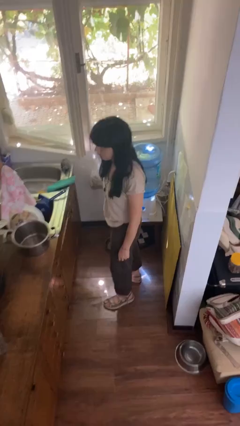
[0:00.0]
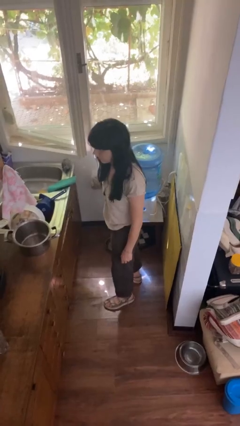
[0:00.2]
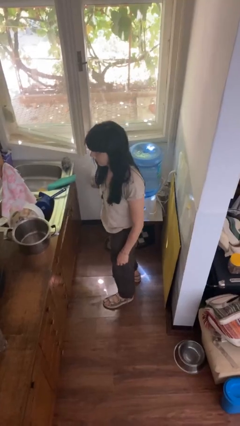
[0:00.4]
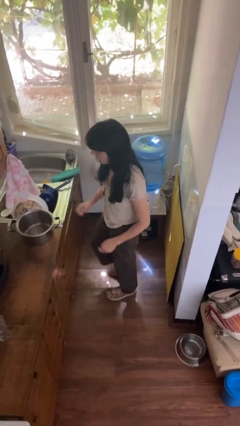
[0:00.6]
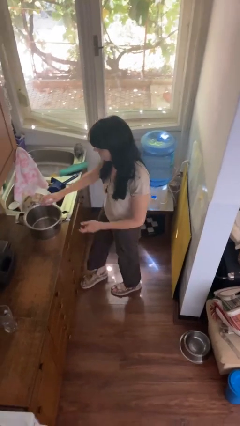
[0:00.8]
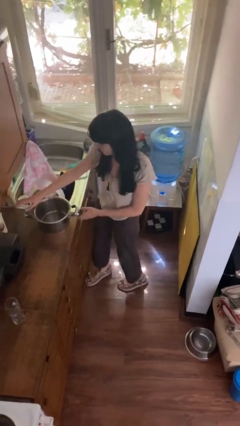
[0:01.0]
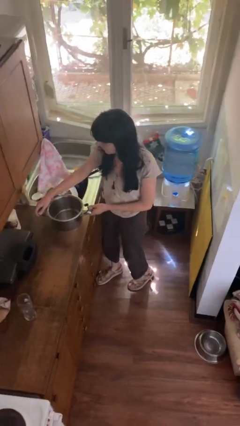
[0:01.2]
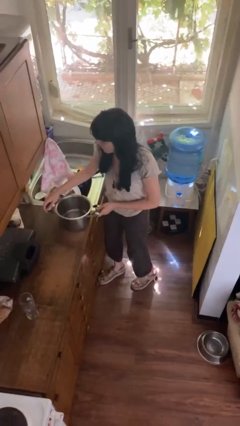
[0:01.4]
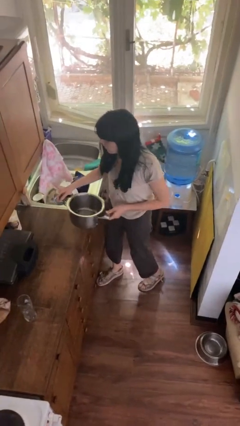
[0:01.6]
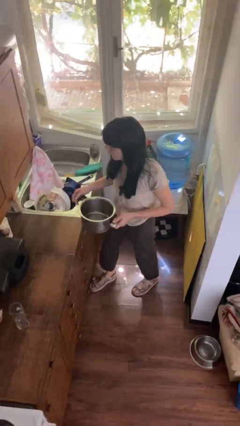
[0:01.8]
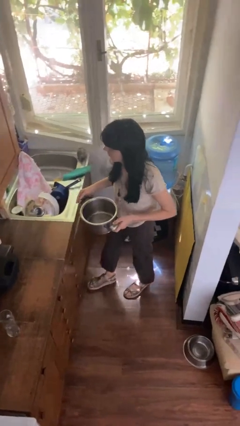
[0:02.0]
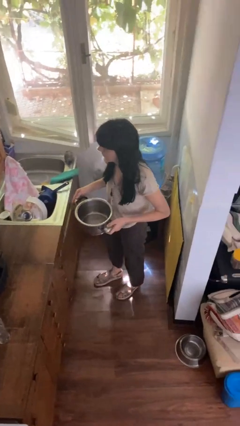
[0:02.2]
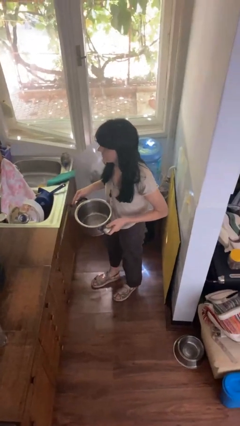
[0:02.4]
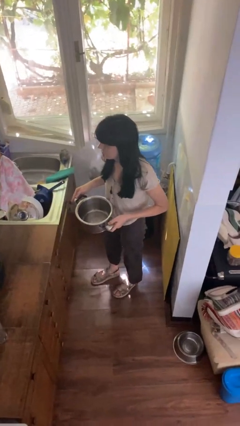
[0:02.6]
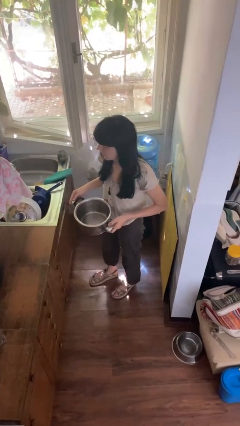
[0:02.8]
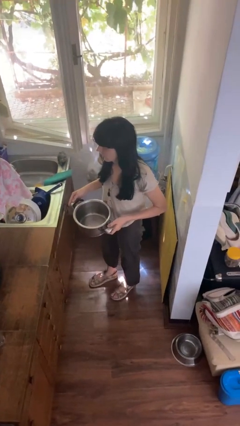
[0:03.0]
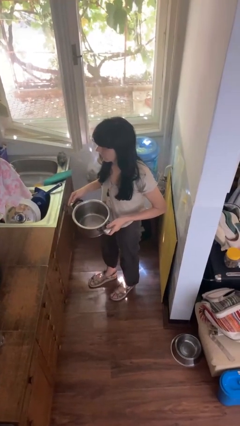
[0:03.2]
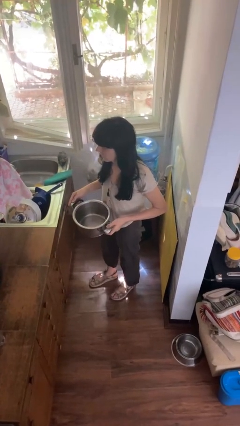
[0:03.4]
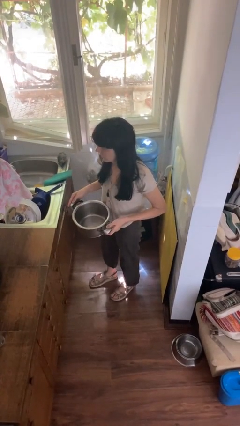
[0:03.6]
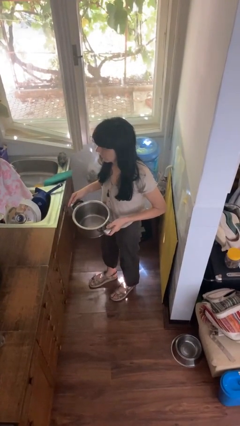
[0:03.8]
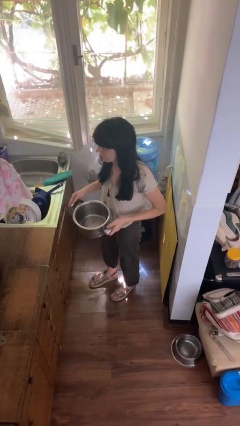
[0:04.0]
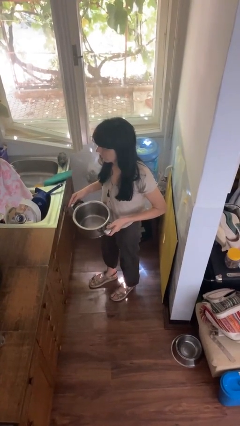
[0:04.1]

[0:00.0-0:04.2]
person picks up object from countertop

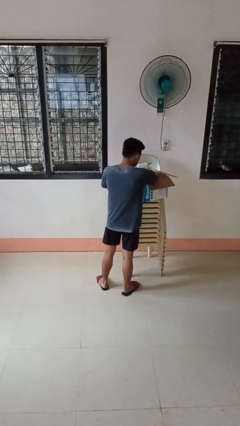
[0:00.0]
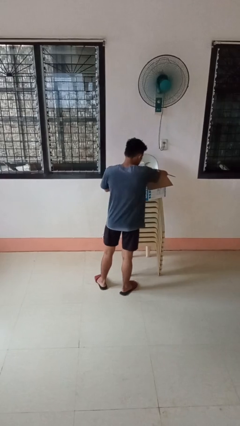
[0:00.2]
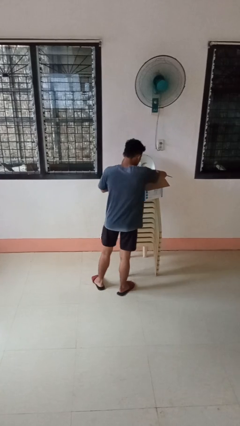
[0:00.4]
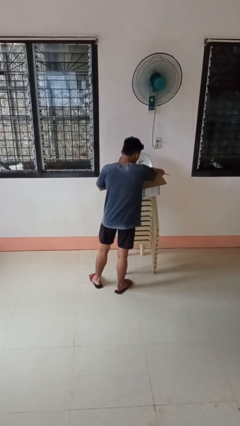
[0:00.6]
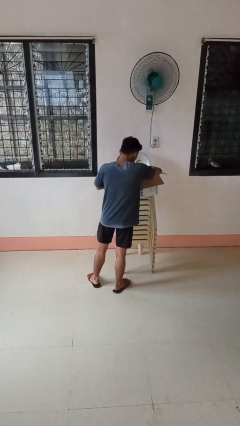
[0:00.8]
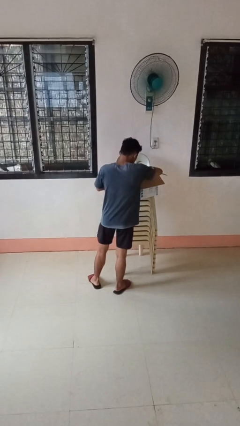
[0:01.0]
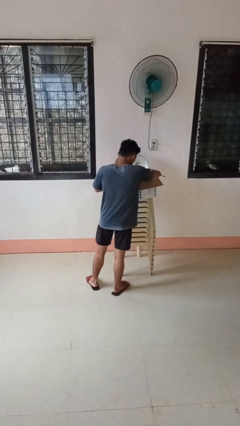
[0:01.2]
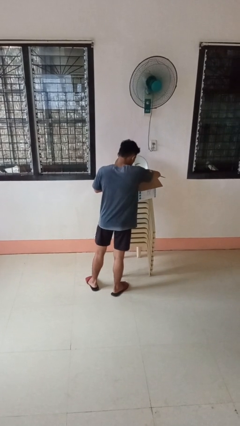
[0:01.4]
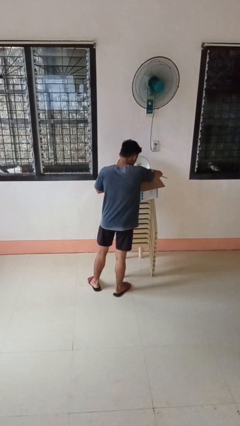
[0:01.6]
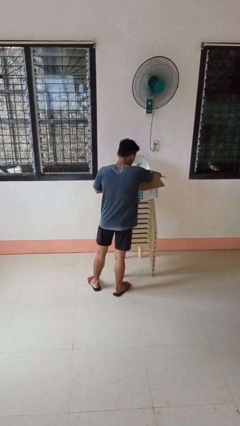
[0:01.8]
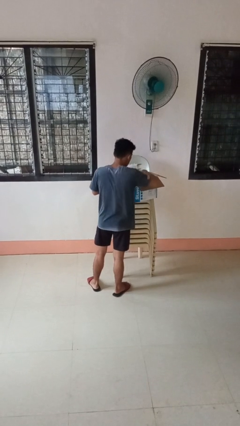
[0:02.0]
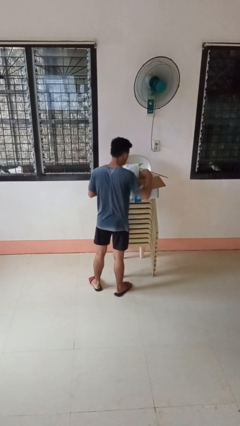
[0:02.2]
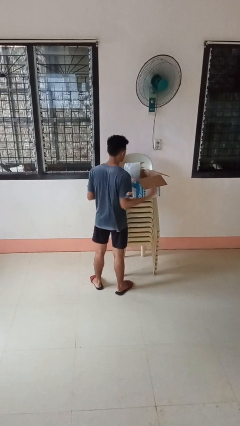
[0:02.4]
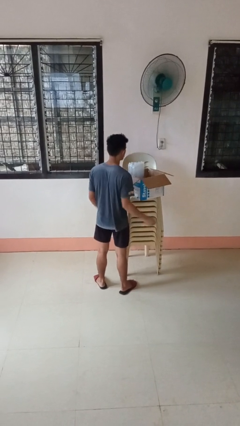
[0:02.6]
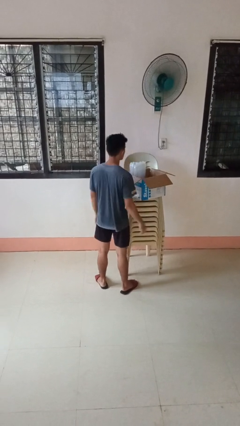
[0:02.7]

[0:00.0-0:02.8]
person searches in box

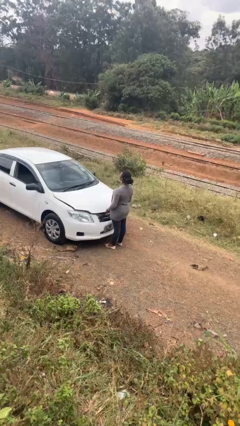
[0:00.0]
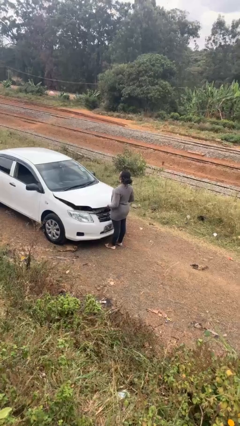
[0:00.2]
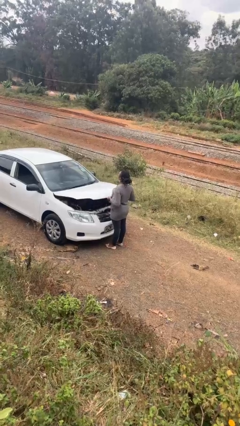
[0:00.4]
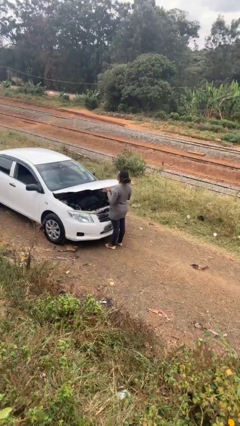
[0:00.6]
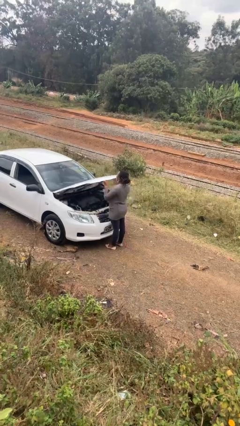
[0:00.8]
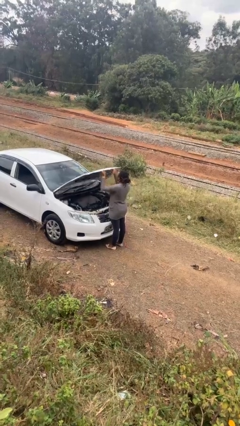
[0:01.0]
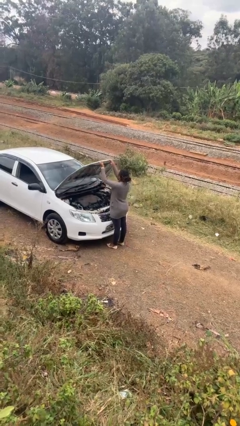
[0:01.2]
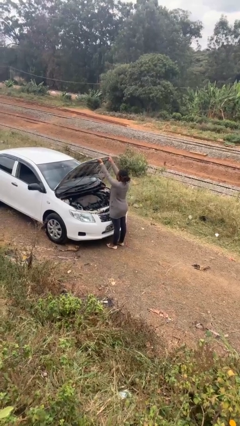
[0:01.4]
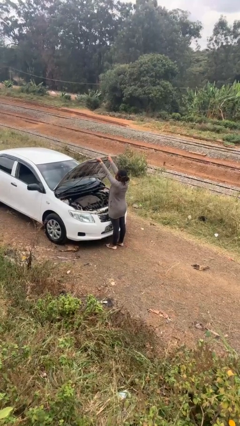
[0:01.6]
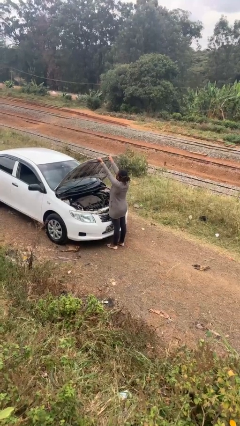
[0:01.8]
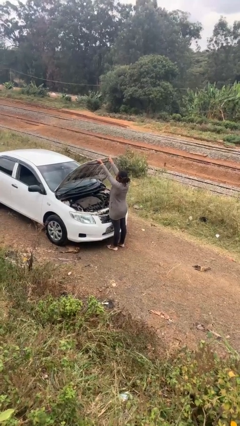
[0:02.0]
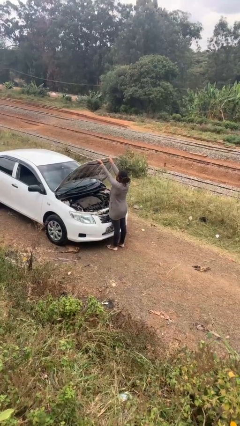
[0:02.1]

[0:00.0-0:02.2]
person opens car hood

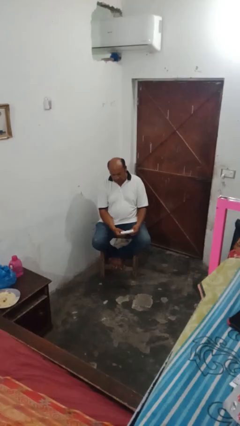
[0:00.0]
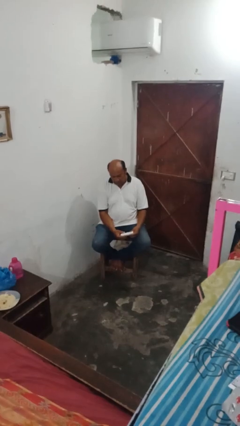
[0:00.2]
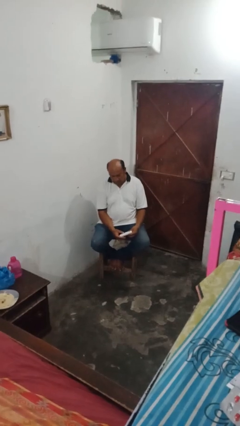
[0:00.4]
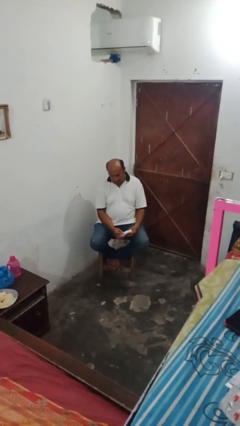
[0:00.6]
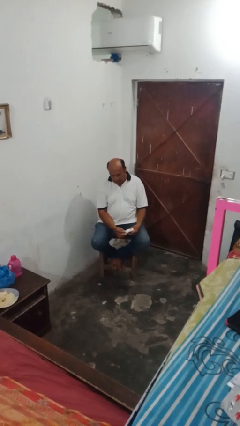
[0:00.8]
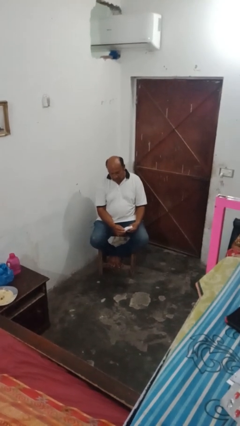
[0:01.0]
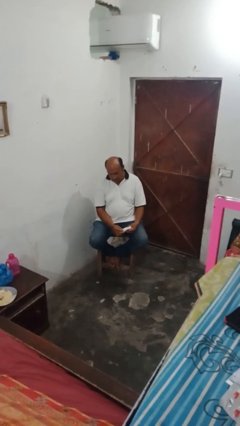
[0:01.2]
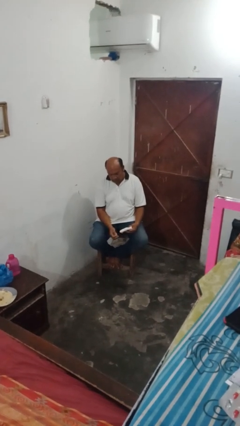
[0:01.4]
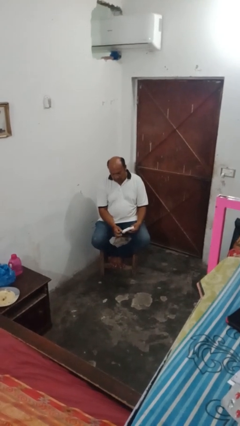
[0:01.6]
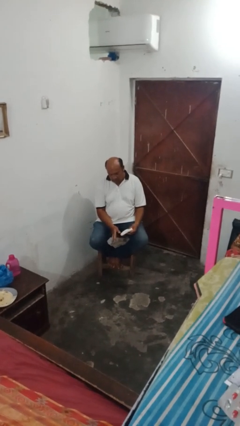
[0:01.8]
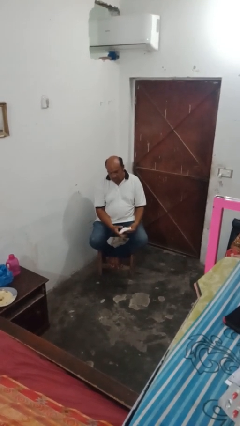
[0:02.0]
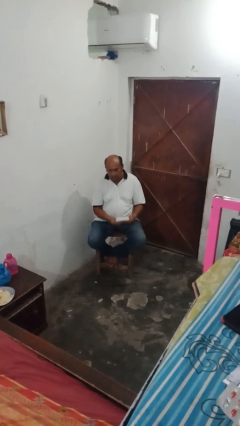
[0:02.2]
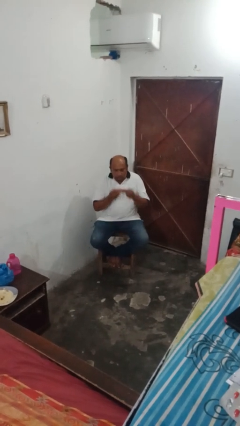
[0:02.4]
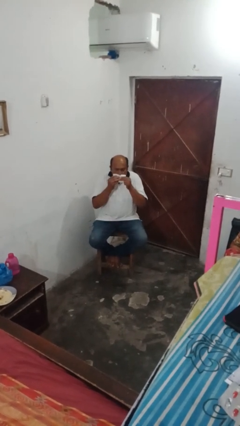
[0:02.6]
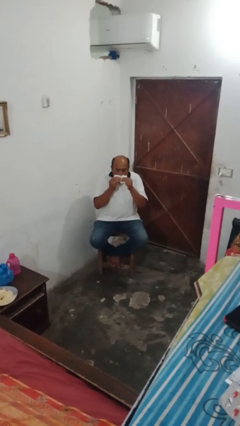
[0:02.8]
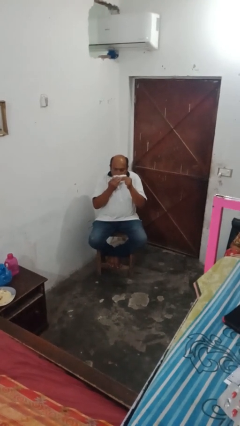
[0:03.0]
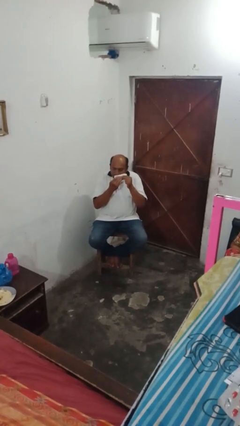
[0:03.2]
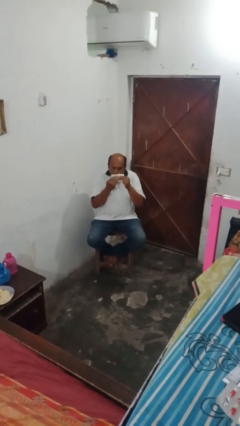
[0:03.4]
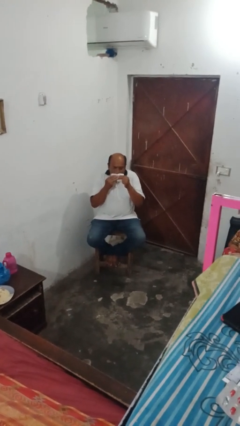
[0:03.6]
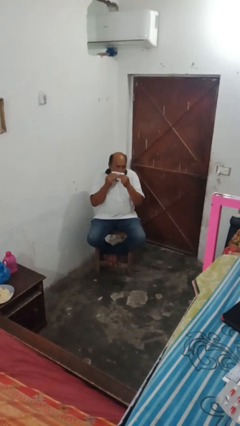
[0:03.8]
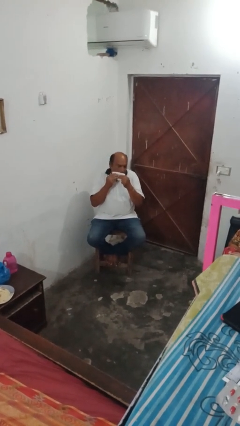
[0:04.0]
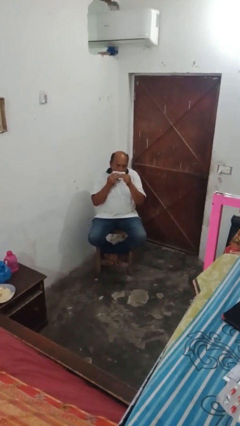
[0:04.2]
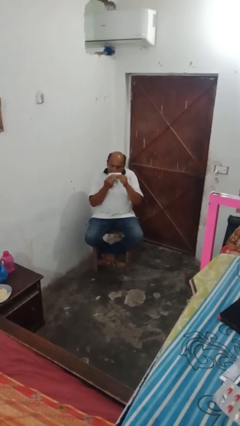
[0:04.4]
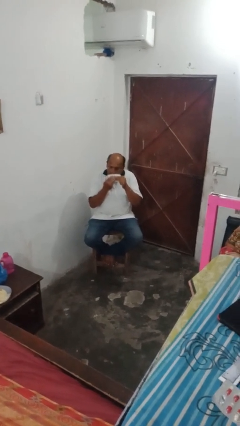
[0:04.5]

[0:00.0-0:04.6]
person wipes mouth with napkin

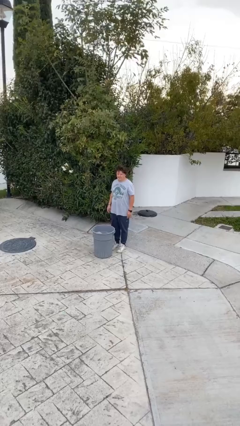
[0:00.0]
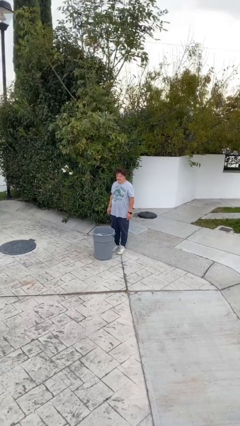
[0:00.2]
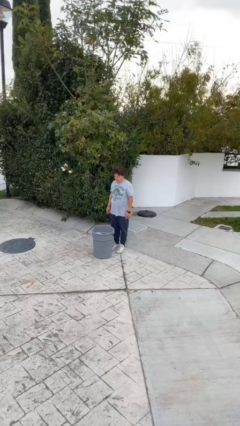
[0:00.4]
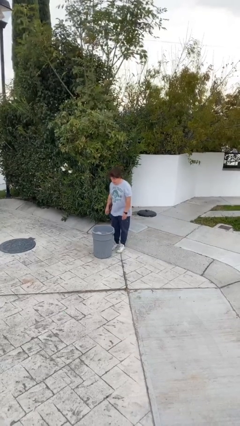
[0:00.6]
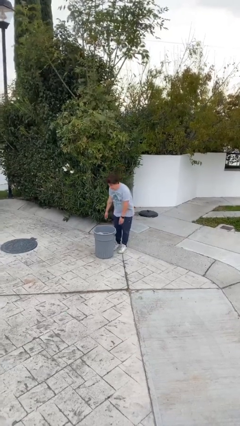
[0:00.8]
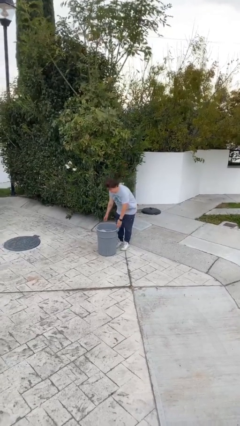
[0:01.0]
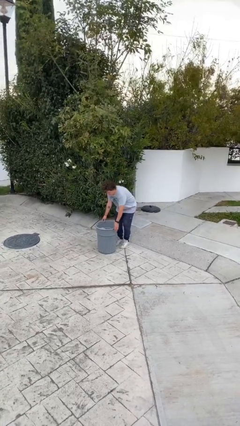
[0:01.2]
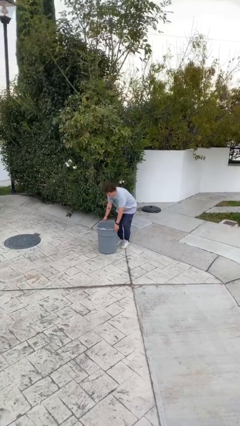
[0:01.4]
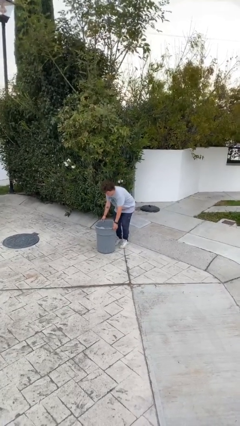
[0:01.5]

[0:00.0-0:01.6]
person picks up object from floor

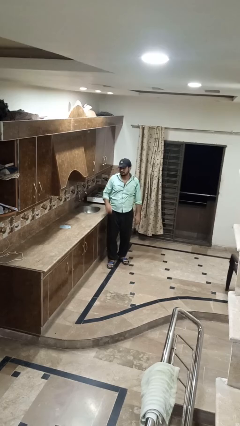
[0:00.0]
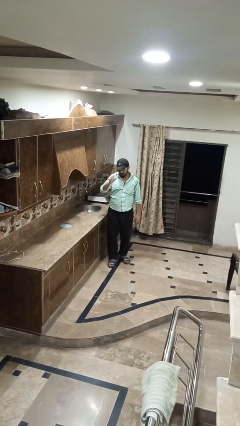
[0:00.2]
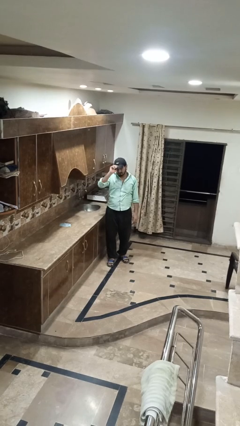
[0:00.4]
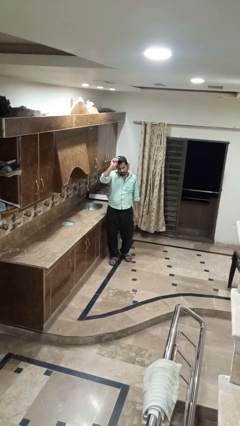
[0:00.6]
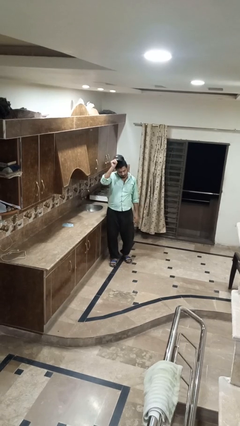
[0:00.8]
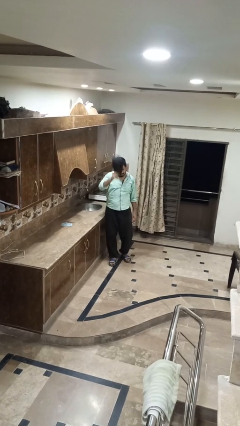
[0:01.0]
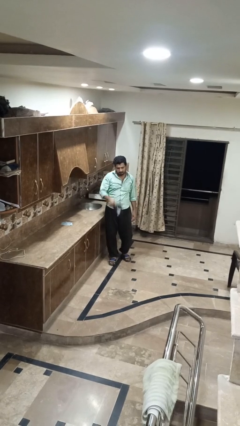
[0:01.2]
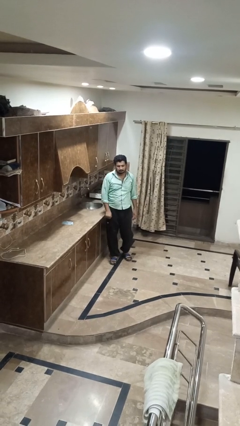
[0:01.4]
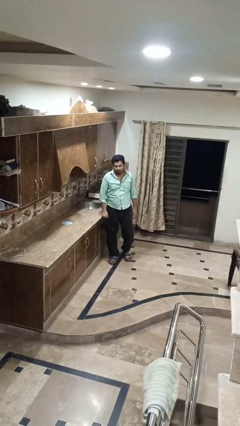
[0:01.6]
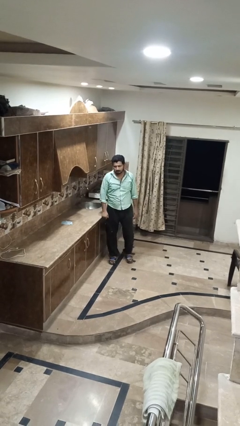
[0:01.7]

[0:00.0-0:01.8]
person takes off hat
